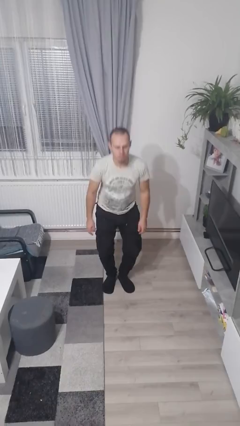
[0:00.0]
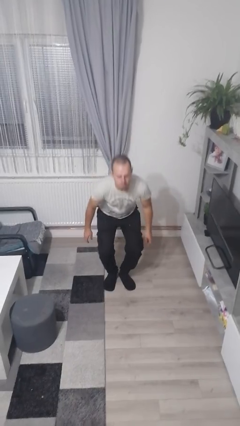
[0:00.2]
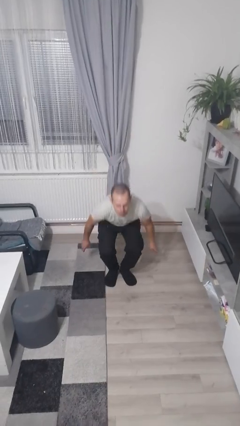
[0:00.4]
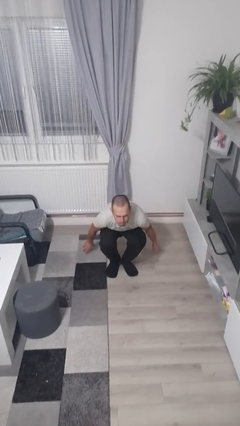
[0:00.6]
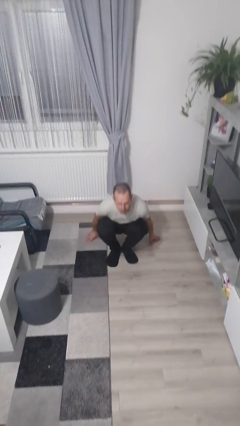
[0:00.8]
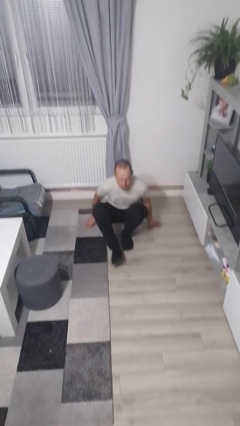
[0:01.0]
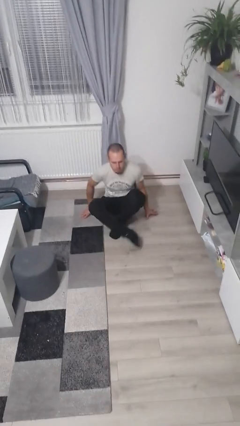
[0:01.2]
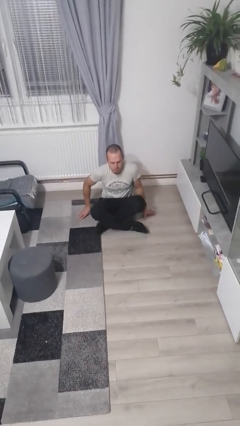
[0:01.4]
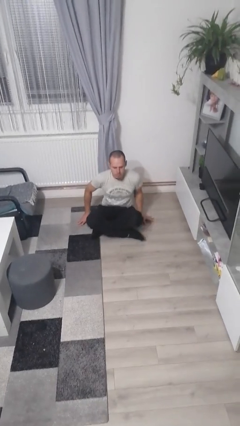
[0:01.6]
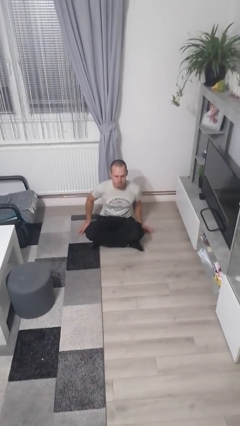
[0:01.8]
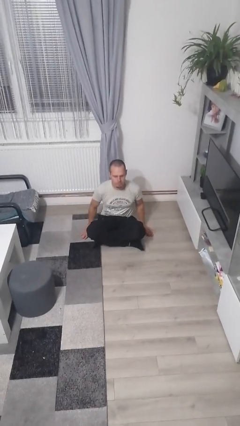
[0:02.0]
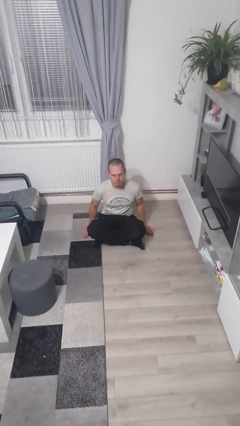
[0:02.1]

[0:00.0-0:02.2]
person sits crisscross

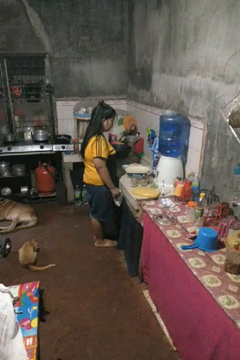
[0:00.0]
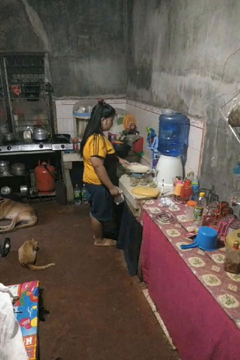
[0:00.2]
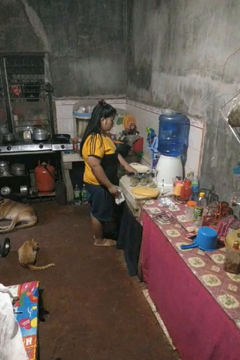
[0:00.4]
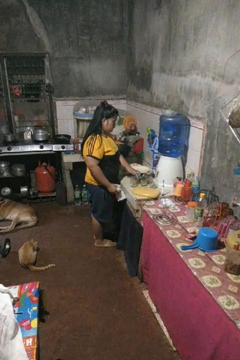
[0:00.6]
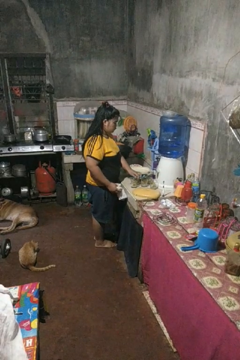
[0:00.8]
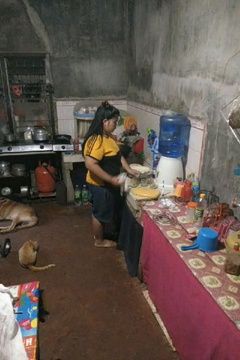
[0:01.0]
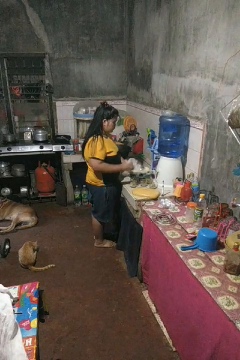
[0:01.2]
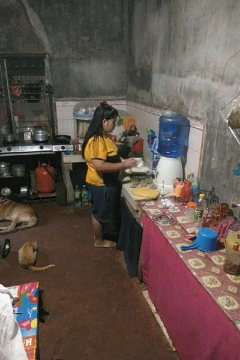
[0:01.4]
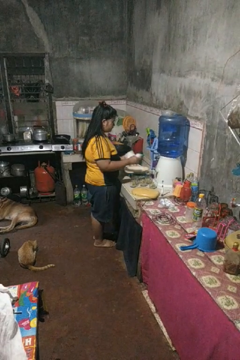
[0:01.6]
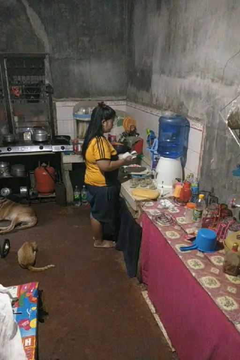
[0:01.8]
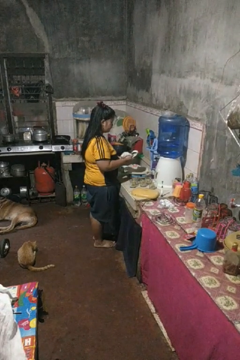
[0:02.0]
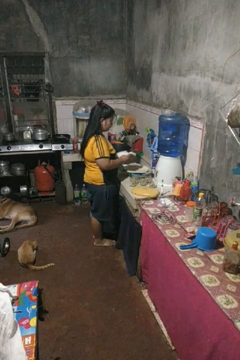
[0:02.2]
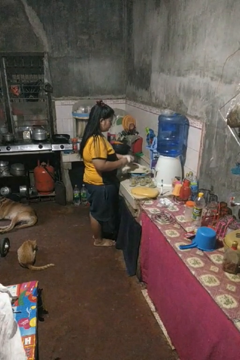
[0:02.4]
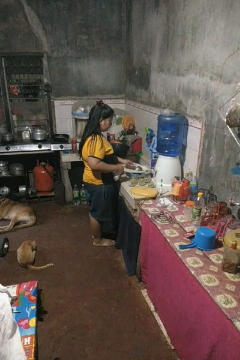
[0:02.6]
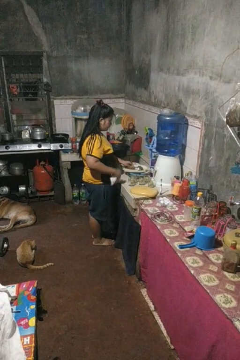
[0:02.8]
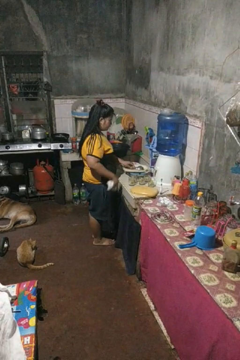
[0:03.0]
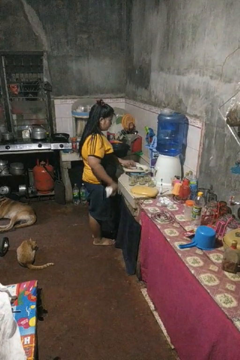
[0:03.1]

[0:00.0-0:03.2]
person dries dish

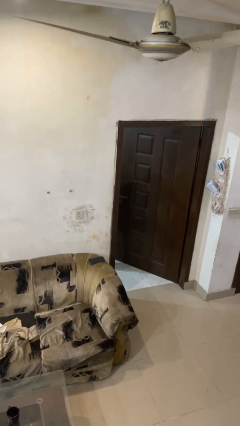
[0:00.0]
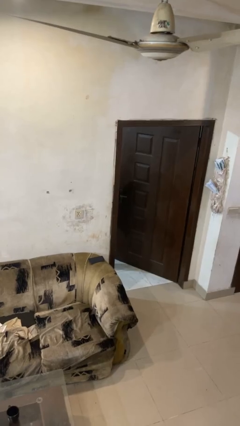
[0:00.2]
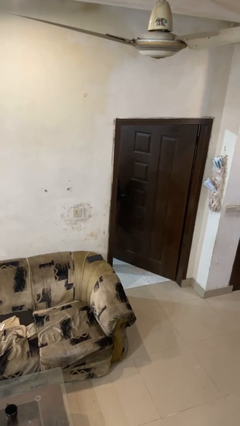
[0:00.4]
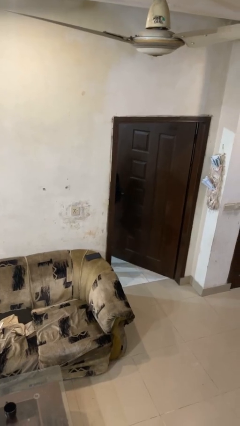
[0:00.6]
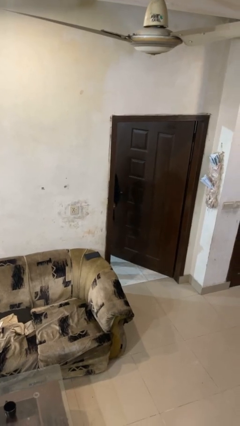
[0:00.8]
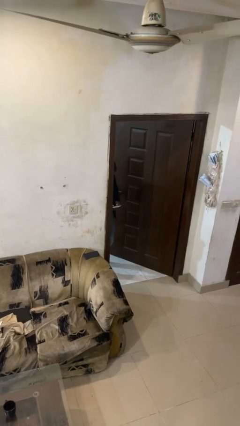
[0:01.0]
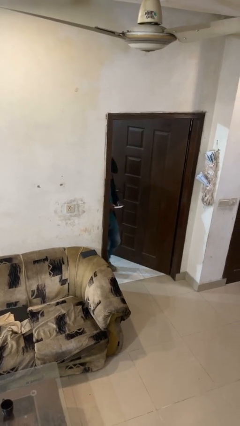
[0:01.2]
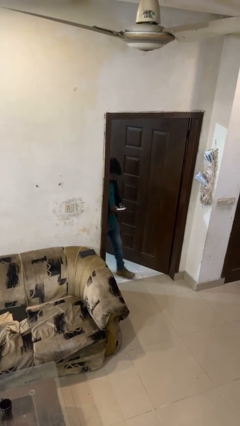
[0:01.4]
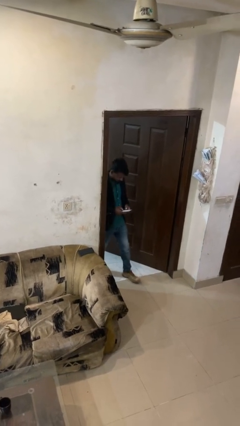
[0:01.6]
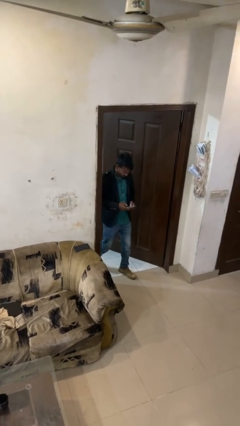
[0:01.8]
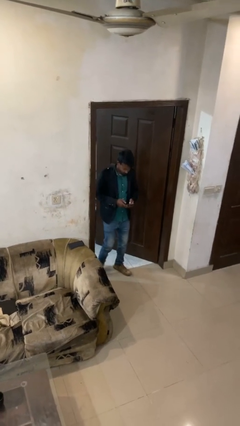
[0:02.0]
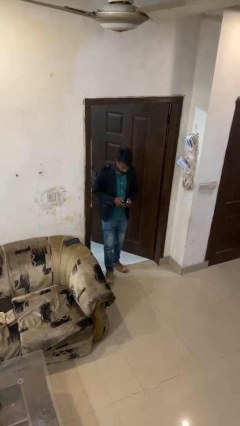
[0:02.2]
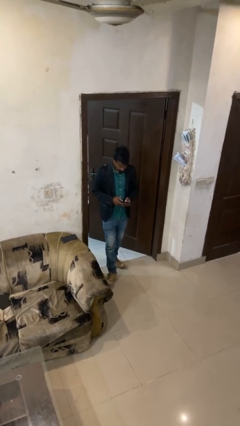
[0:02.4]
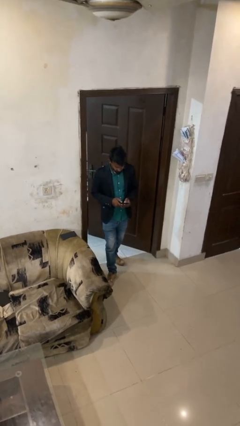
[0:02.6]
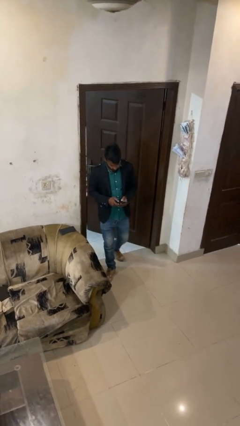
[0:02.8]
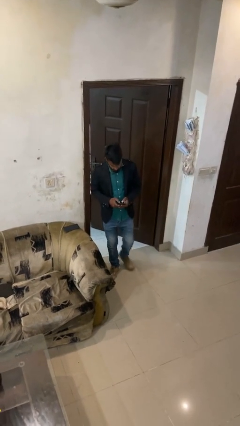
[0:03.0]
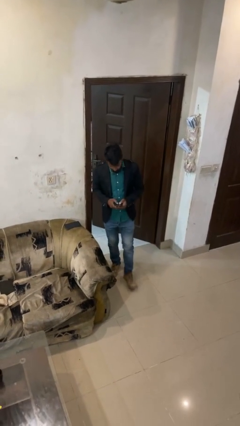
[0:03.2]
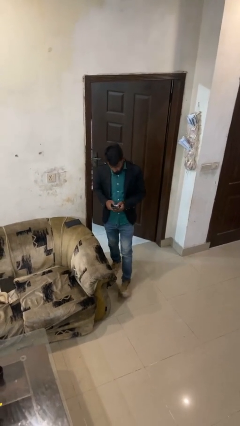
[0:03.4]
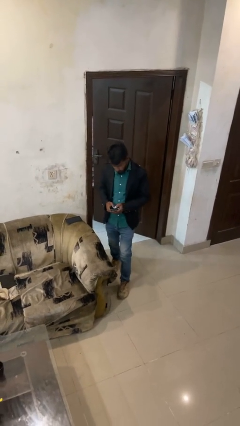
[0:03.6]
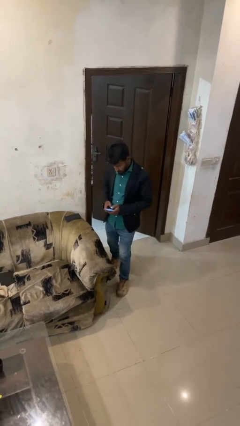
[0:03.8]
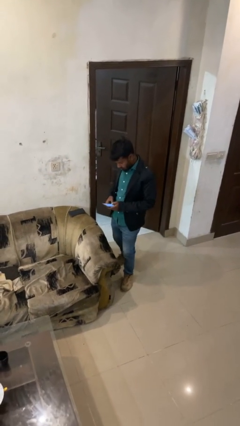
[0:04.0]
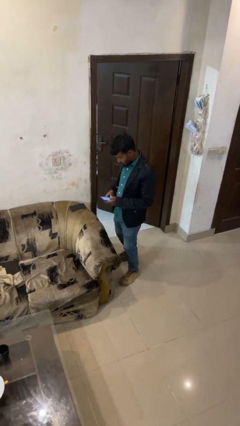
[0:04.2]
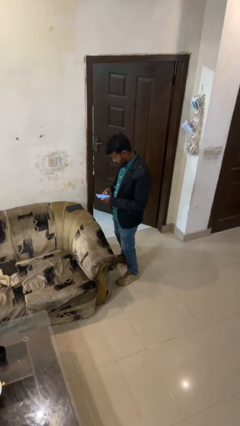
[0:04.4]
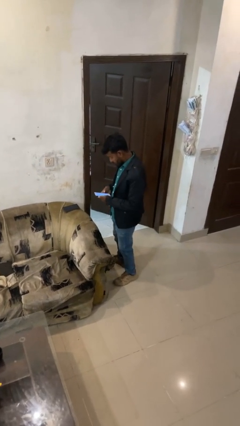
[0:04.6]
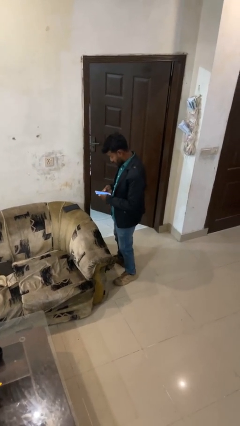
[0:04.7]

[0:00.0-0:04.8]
person enters scene through structure

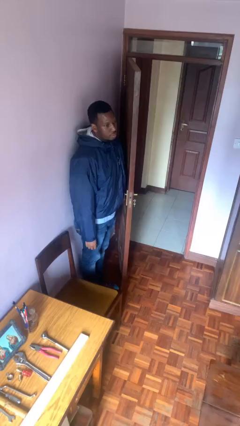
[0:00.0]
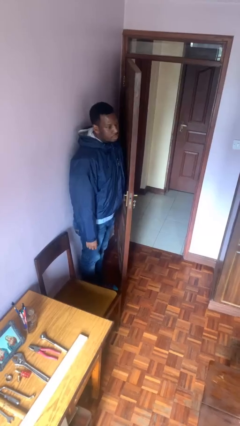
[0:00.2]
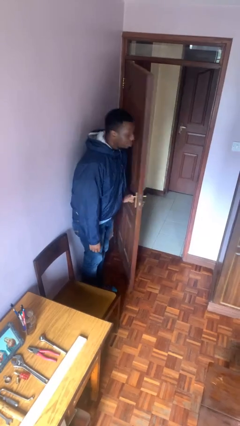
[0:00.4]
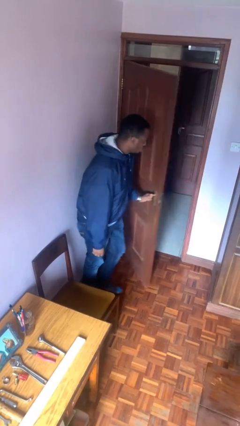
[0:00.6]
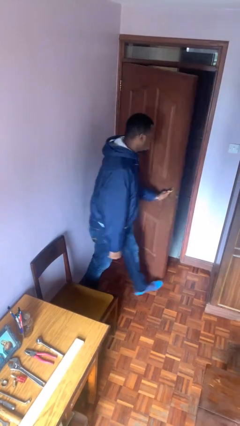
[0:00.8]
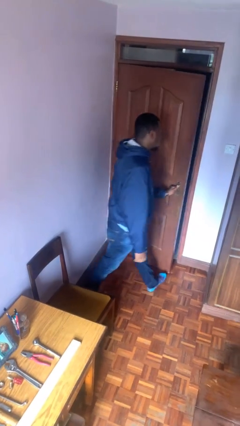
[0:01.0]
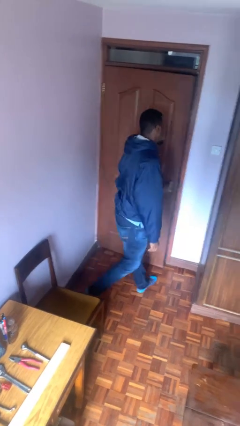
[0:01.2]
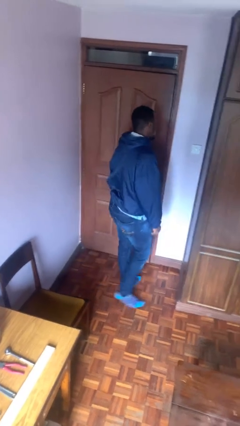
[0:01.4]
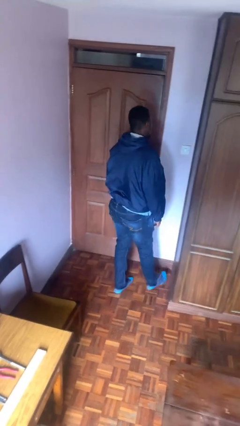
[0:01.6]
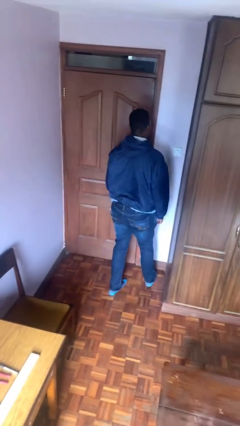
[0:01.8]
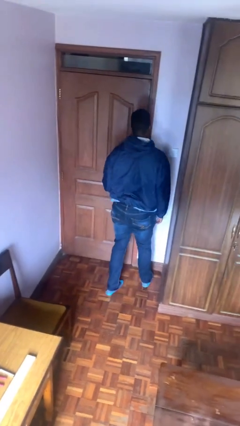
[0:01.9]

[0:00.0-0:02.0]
person closes facility door

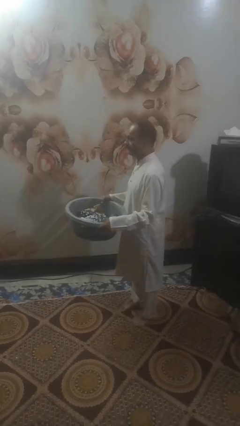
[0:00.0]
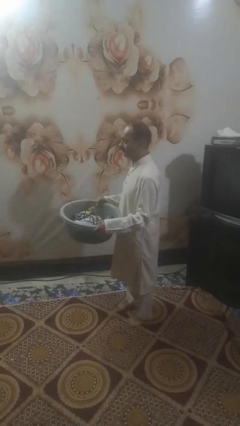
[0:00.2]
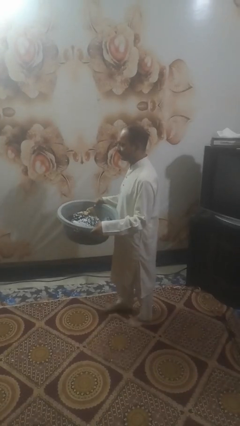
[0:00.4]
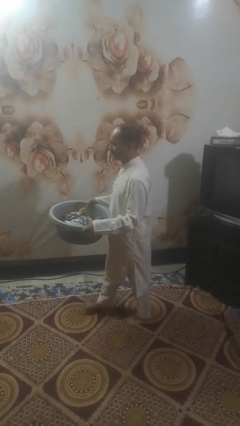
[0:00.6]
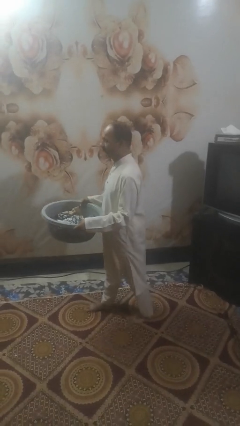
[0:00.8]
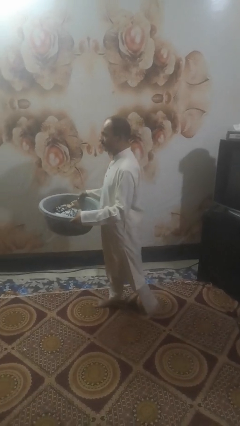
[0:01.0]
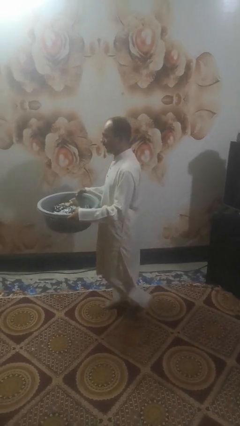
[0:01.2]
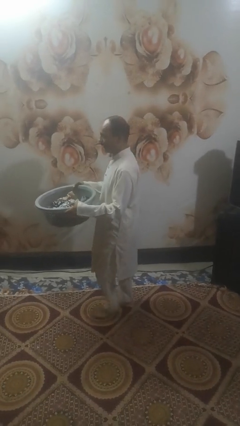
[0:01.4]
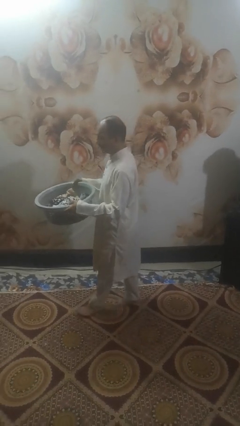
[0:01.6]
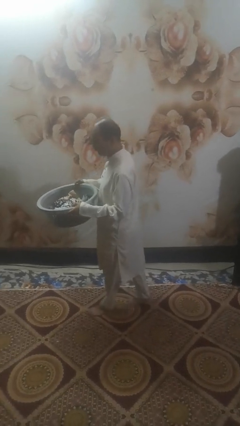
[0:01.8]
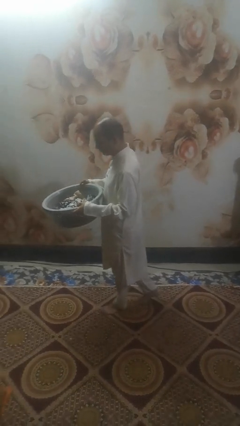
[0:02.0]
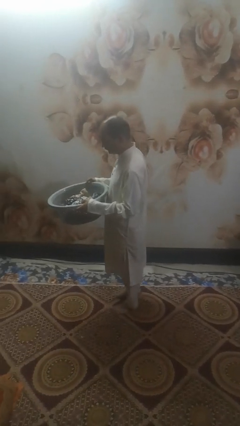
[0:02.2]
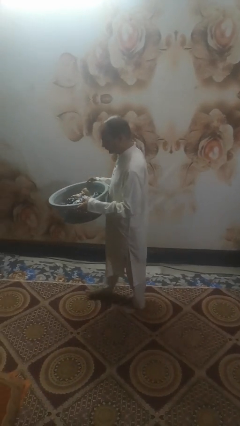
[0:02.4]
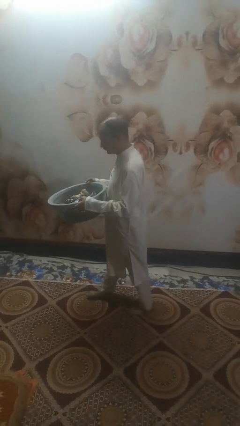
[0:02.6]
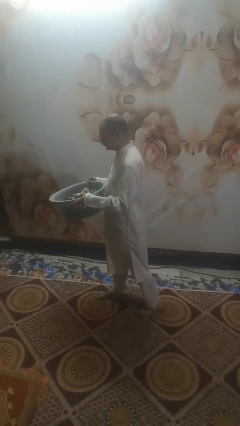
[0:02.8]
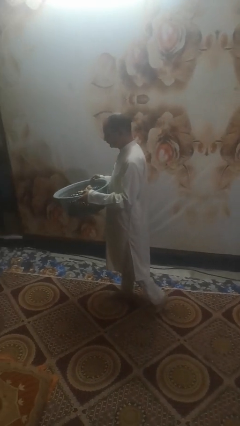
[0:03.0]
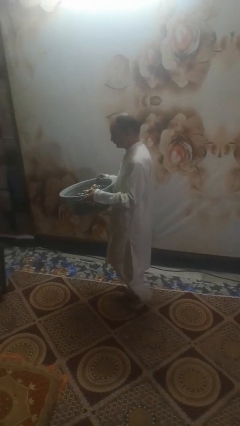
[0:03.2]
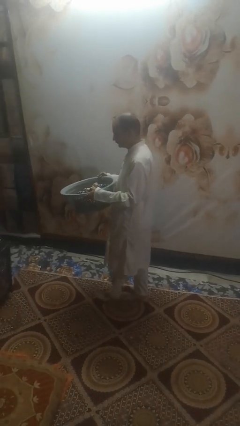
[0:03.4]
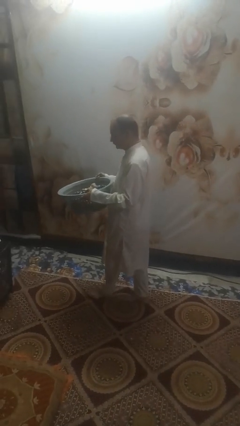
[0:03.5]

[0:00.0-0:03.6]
person carries laundry basket

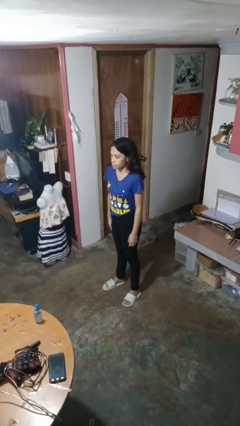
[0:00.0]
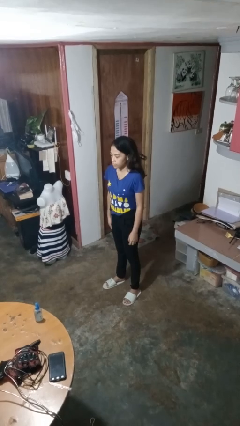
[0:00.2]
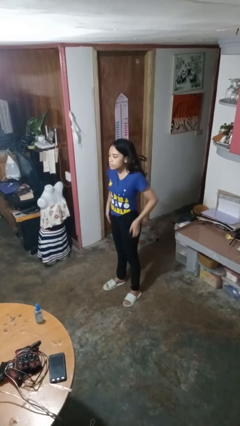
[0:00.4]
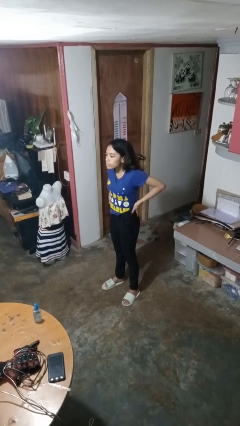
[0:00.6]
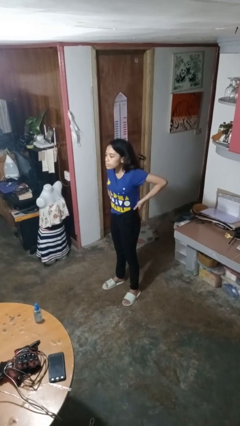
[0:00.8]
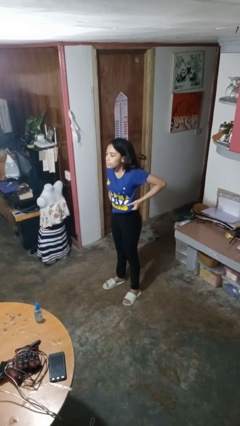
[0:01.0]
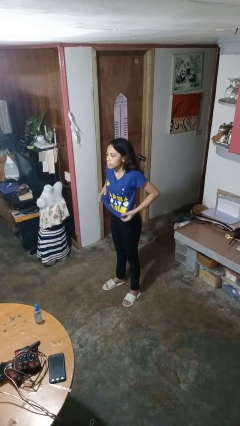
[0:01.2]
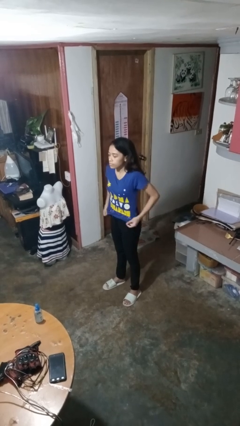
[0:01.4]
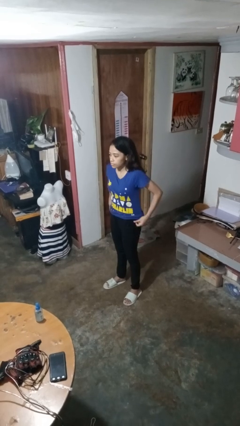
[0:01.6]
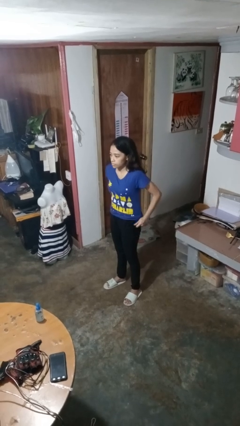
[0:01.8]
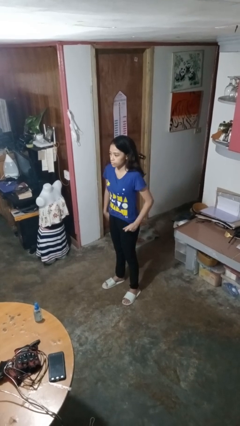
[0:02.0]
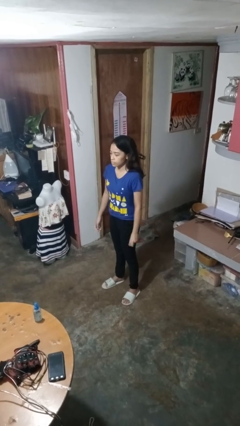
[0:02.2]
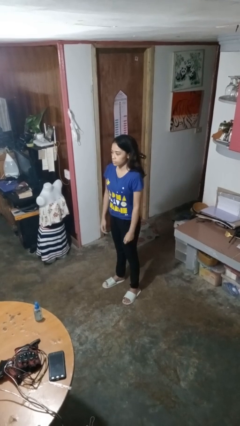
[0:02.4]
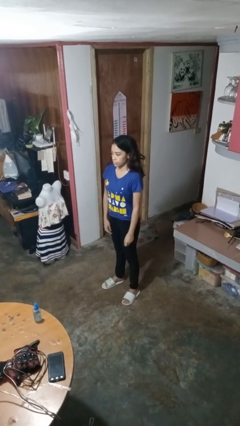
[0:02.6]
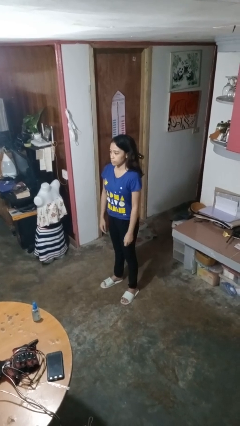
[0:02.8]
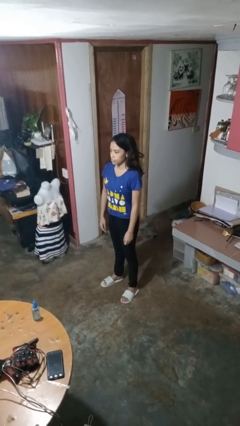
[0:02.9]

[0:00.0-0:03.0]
person untucks shirt
